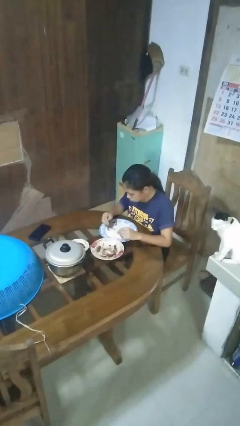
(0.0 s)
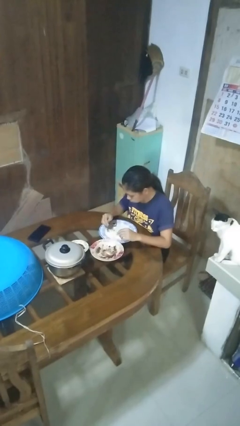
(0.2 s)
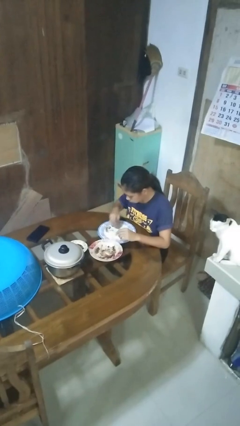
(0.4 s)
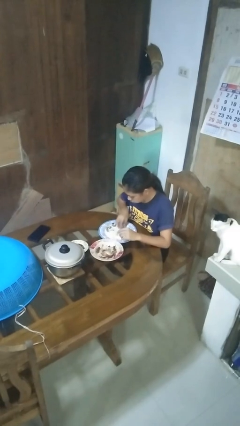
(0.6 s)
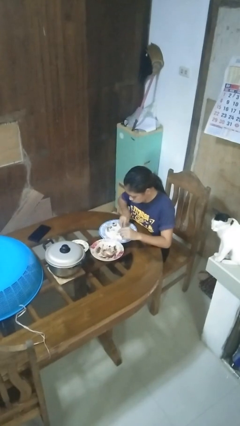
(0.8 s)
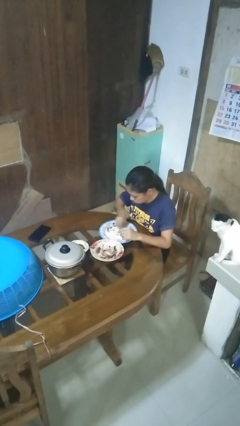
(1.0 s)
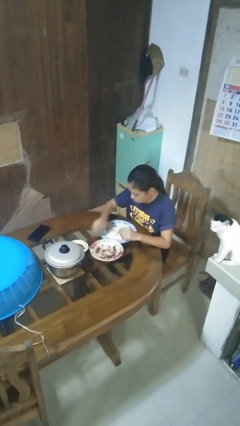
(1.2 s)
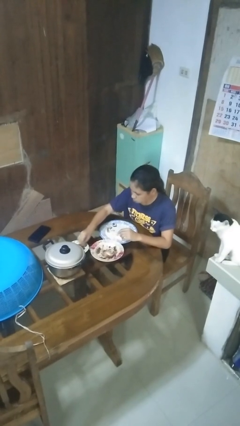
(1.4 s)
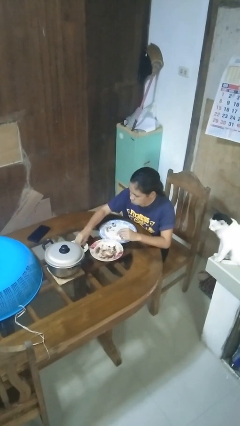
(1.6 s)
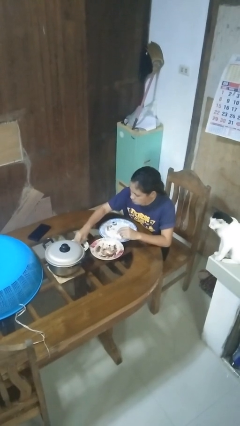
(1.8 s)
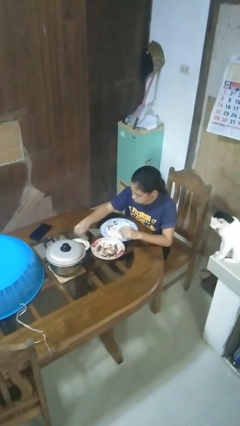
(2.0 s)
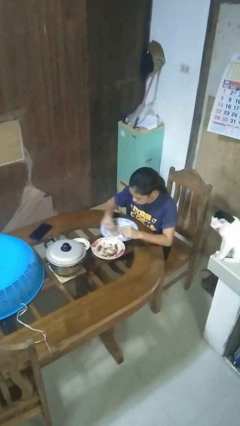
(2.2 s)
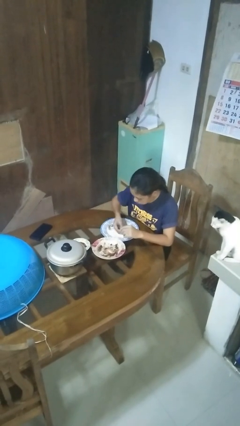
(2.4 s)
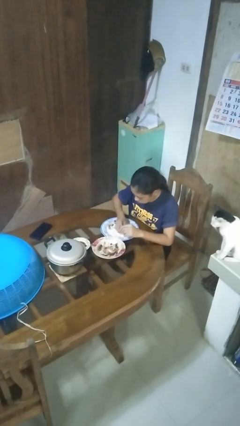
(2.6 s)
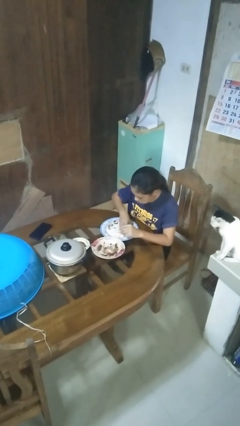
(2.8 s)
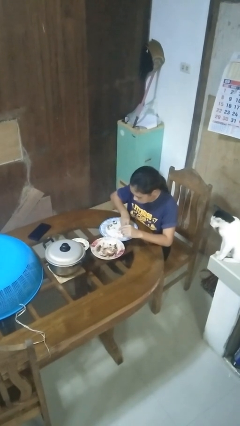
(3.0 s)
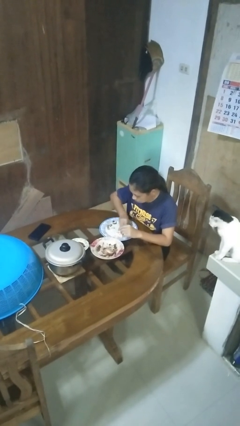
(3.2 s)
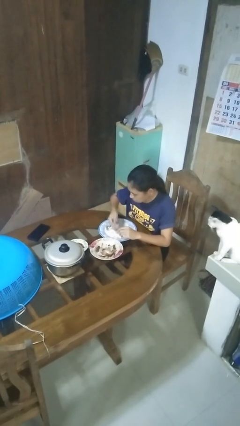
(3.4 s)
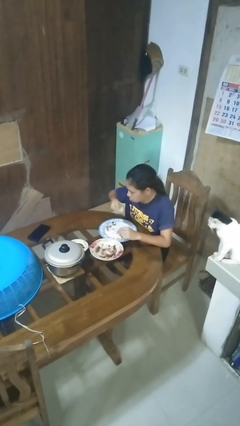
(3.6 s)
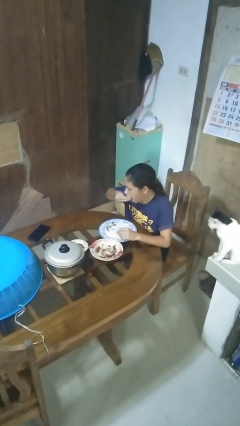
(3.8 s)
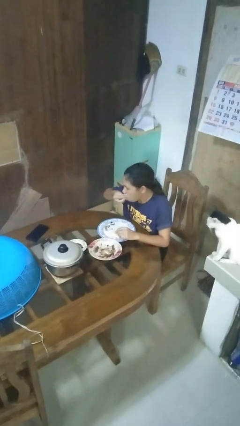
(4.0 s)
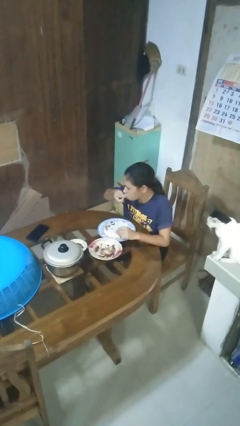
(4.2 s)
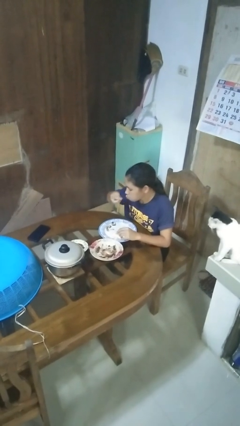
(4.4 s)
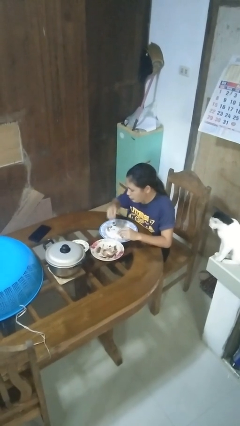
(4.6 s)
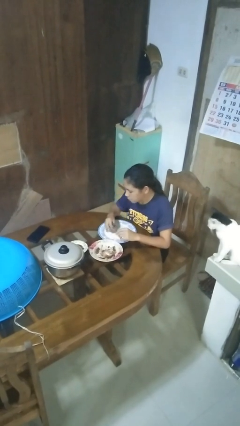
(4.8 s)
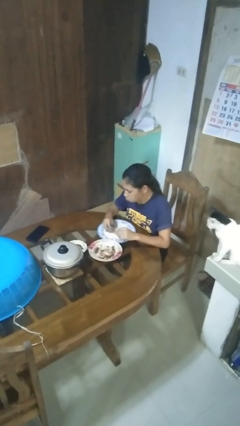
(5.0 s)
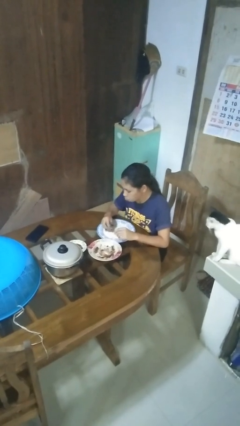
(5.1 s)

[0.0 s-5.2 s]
person eats with hands

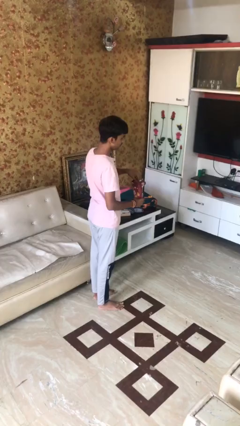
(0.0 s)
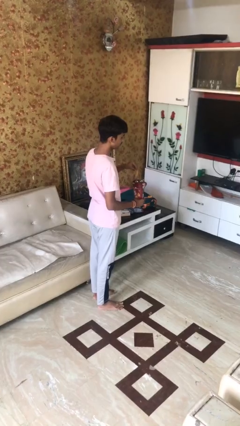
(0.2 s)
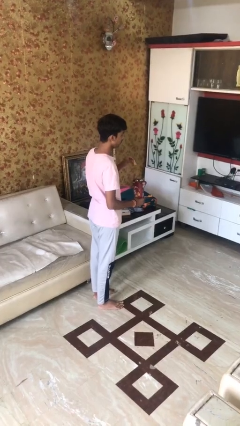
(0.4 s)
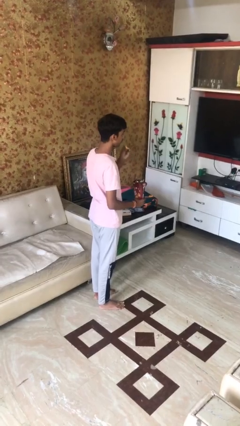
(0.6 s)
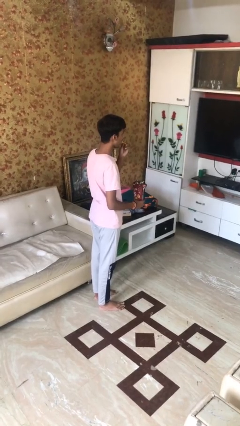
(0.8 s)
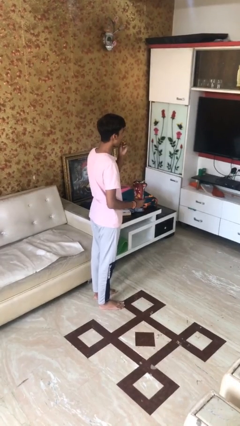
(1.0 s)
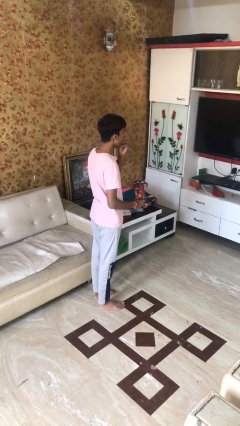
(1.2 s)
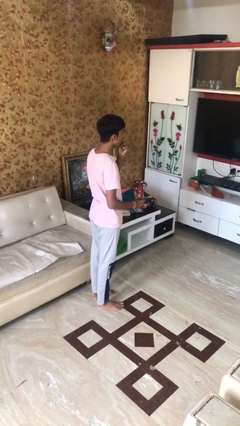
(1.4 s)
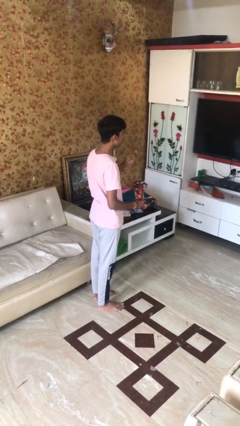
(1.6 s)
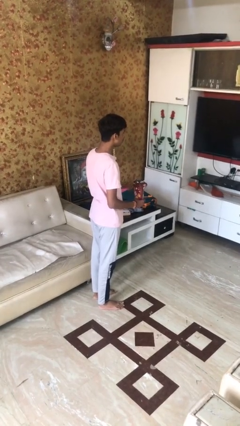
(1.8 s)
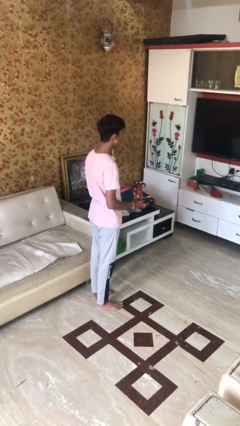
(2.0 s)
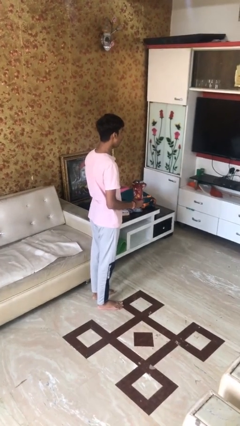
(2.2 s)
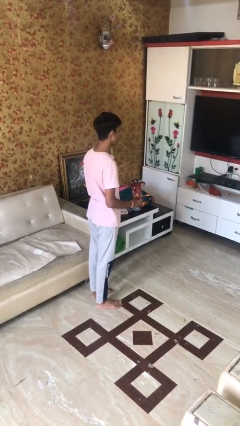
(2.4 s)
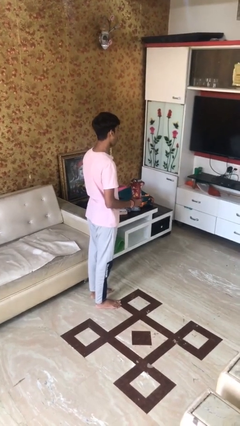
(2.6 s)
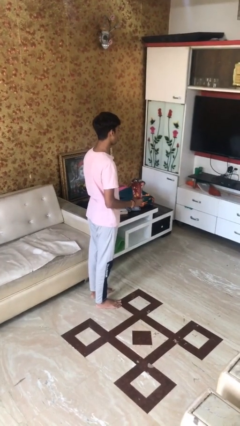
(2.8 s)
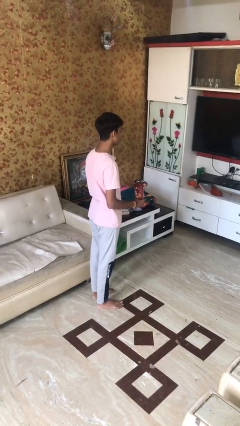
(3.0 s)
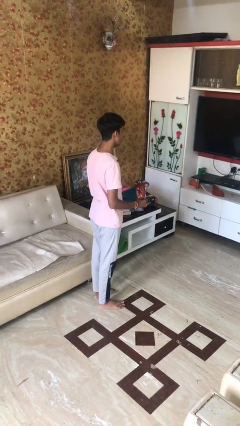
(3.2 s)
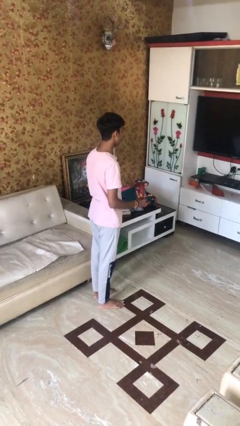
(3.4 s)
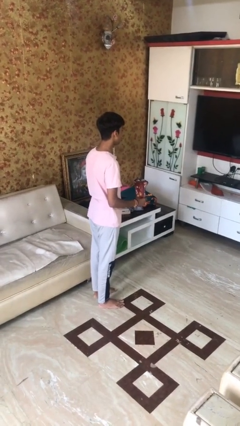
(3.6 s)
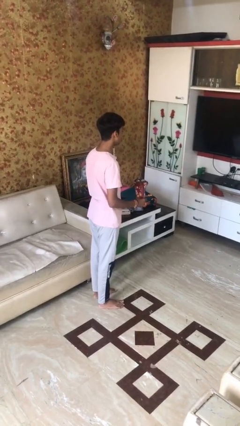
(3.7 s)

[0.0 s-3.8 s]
person eats snack from bag

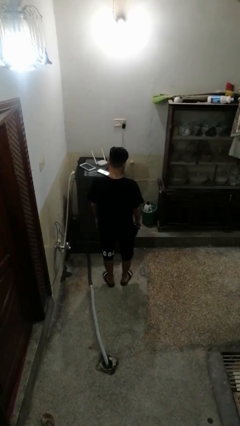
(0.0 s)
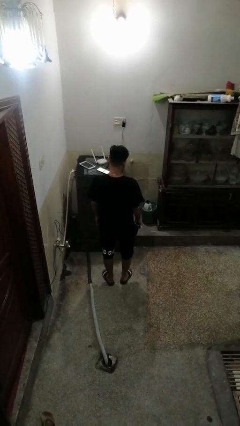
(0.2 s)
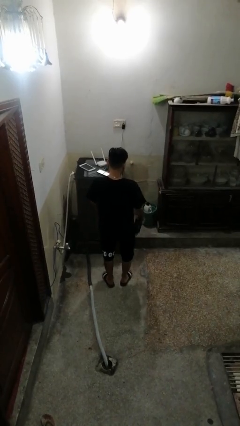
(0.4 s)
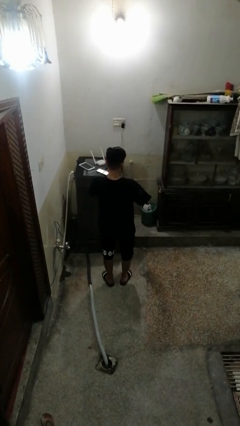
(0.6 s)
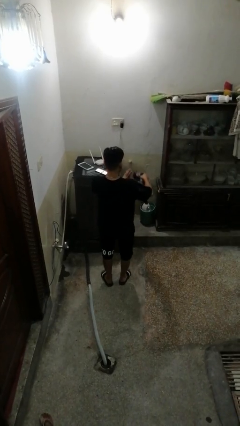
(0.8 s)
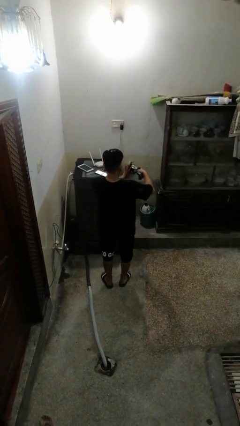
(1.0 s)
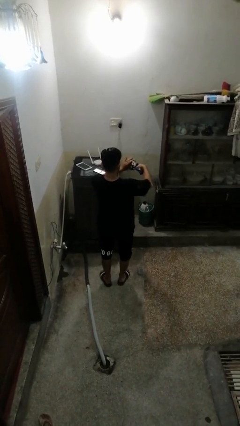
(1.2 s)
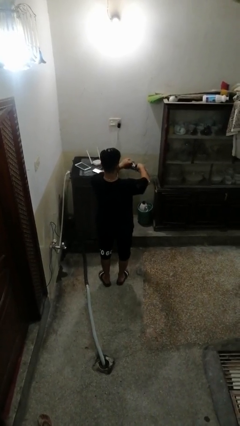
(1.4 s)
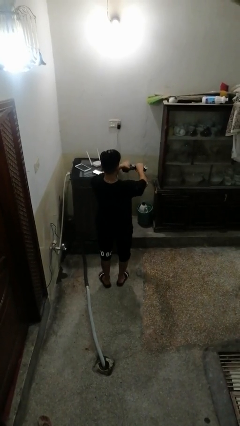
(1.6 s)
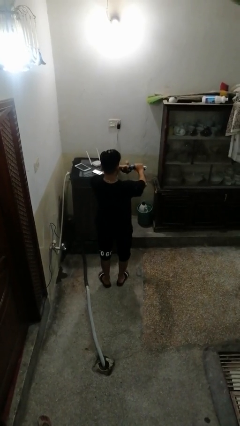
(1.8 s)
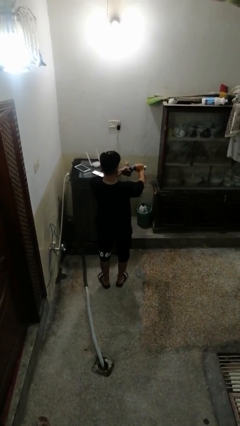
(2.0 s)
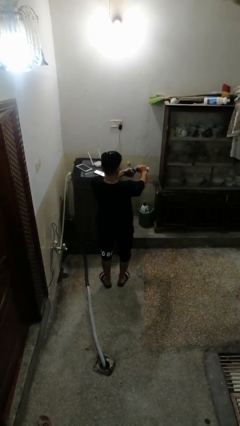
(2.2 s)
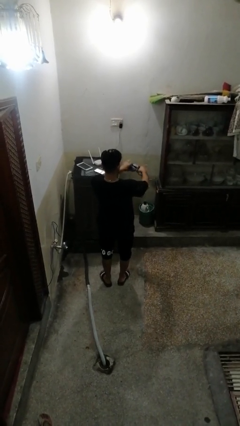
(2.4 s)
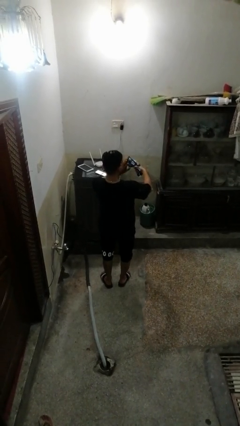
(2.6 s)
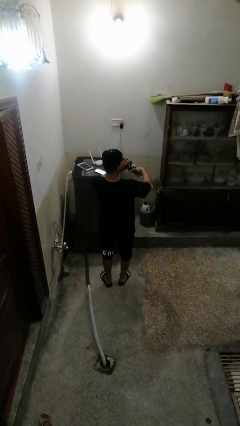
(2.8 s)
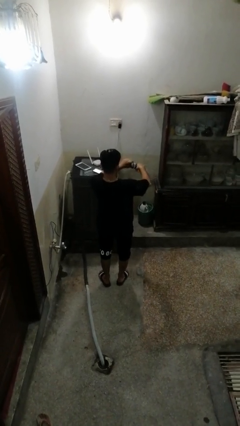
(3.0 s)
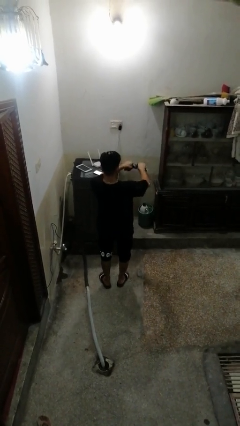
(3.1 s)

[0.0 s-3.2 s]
person squeezes object

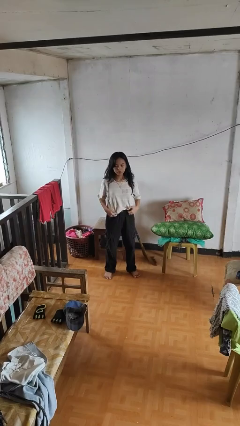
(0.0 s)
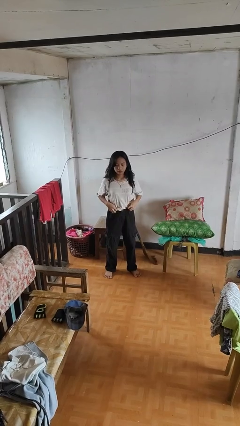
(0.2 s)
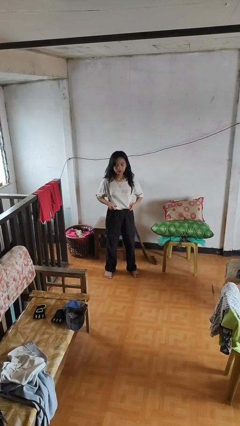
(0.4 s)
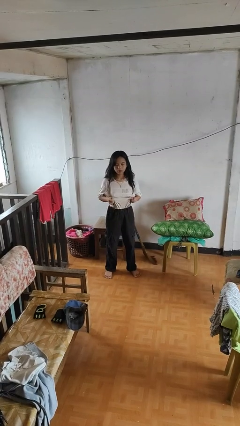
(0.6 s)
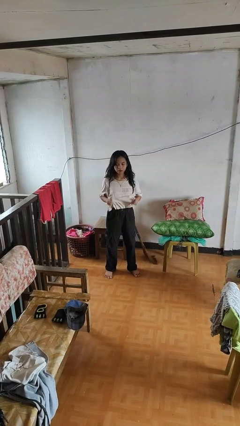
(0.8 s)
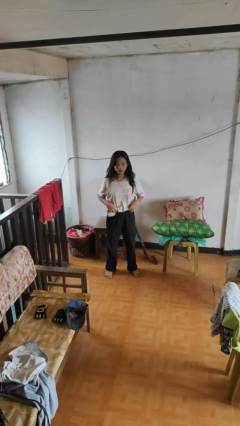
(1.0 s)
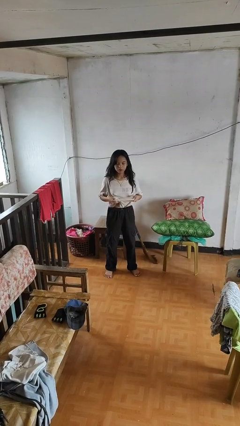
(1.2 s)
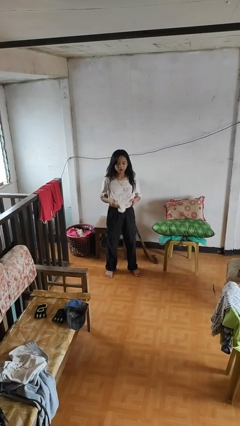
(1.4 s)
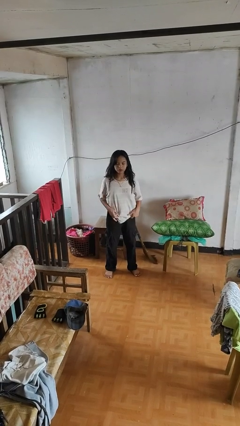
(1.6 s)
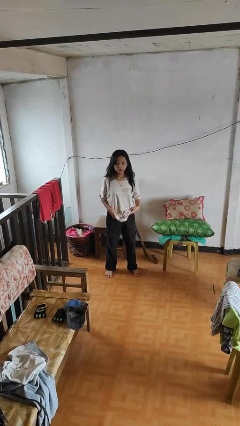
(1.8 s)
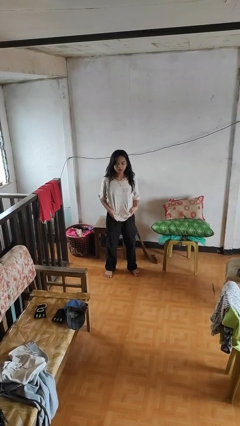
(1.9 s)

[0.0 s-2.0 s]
person untucks shirt

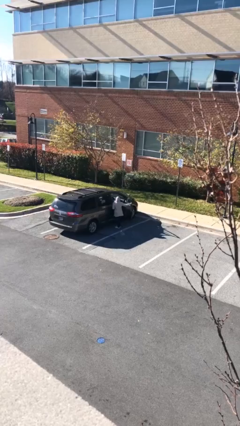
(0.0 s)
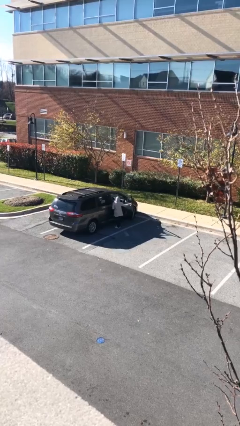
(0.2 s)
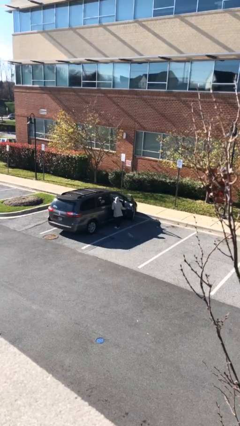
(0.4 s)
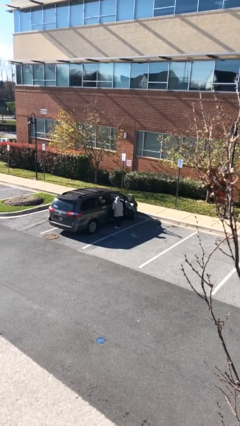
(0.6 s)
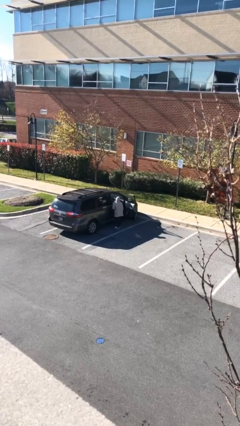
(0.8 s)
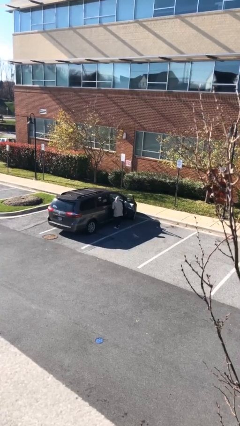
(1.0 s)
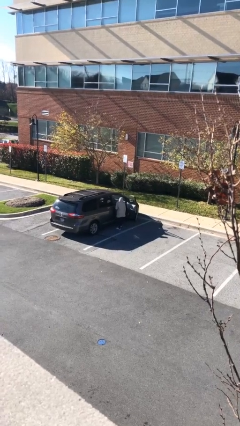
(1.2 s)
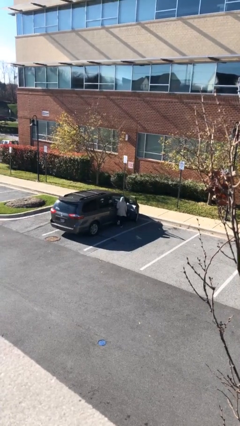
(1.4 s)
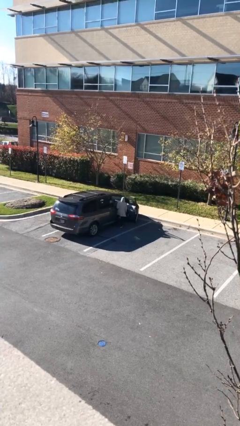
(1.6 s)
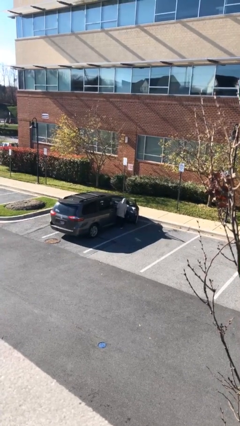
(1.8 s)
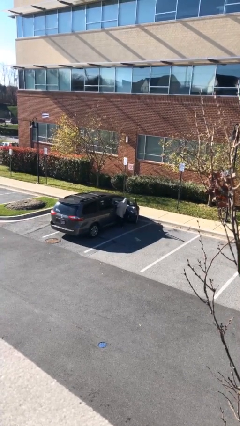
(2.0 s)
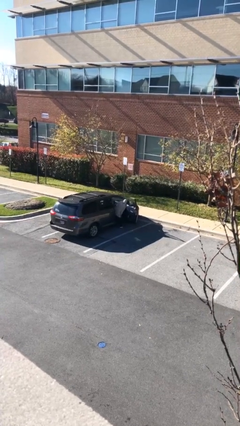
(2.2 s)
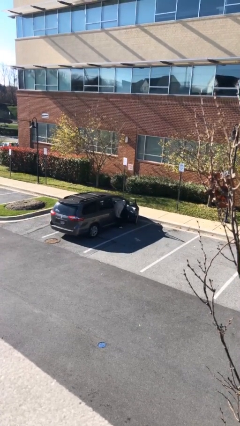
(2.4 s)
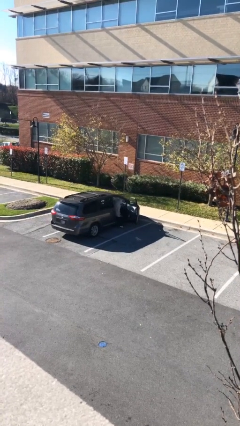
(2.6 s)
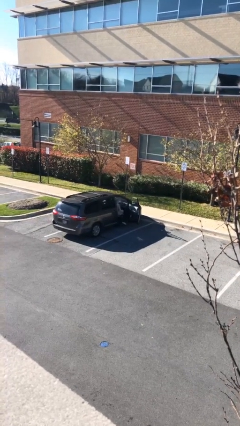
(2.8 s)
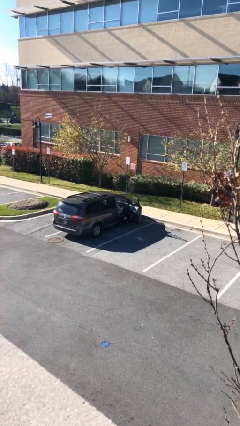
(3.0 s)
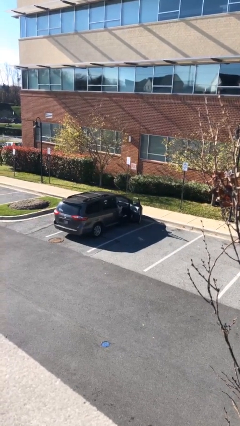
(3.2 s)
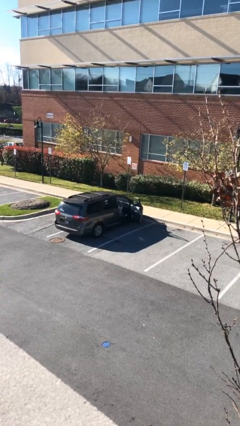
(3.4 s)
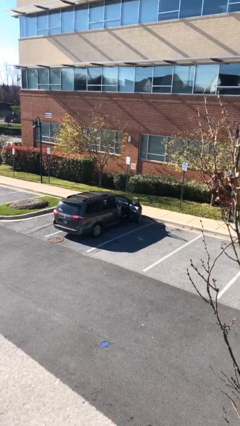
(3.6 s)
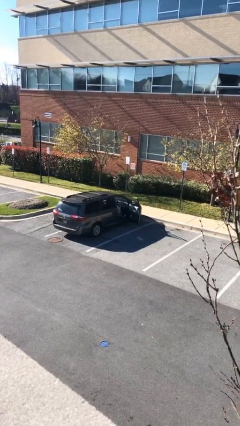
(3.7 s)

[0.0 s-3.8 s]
person enters car
